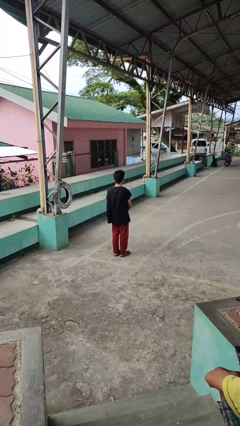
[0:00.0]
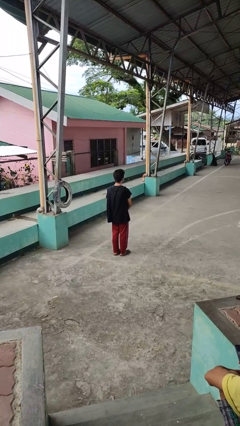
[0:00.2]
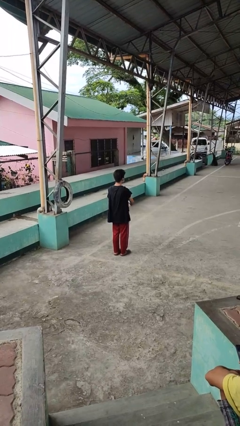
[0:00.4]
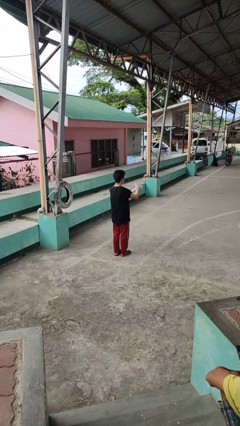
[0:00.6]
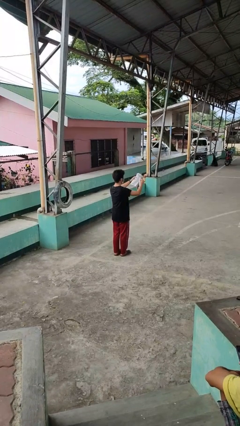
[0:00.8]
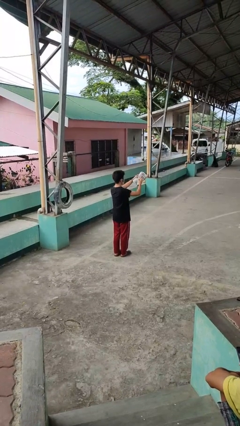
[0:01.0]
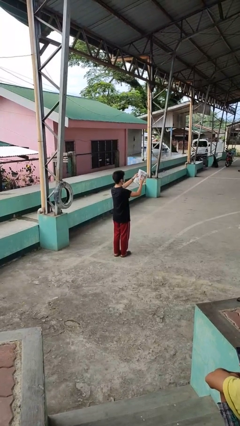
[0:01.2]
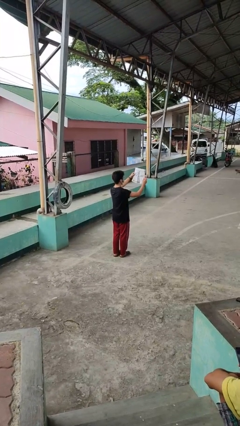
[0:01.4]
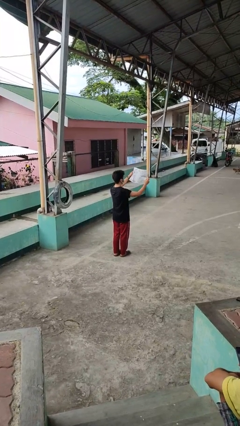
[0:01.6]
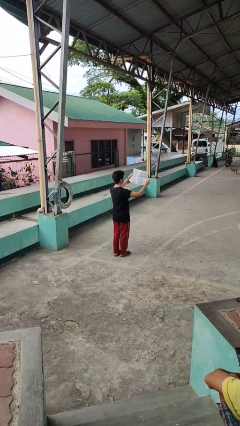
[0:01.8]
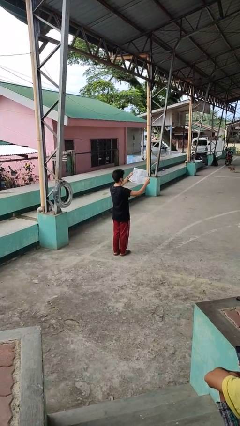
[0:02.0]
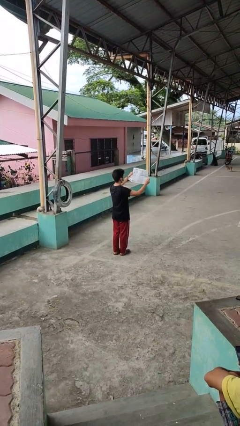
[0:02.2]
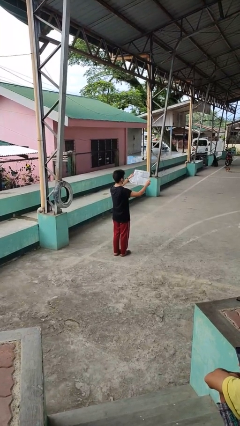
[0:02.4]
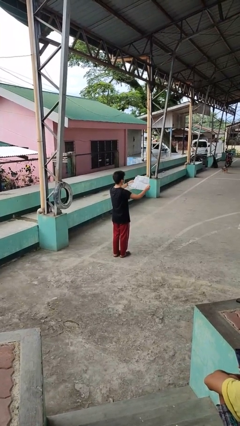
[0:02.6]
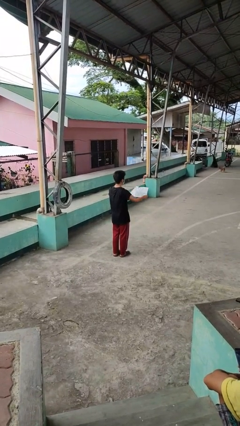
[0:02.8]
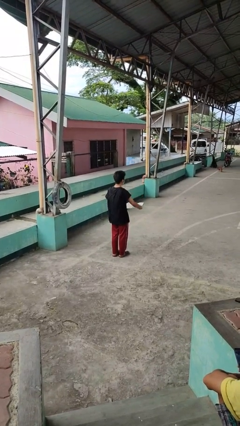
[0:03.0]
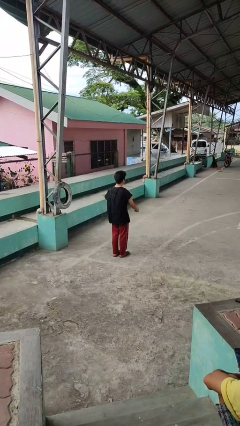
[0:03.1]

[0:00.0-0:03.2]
person reads newspaper

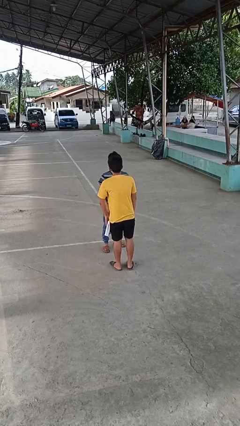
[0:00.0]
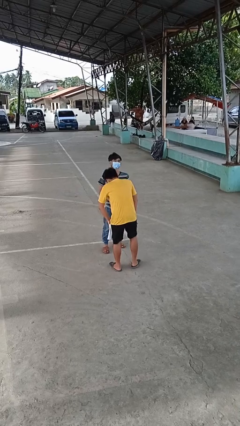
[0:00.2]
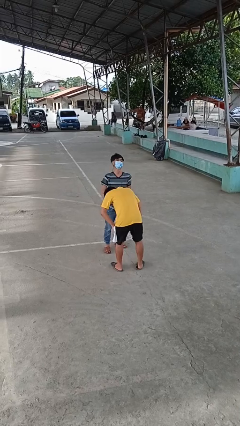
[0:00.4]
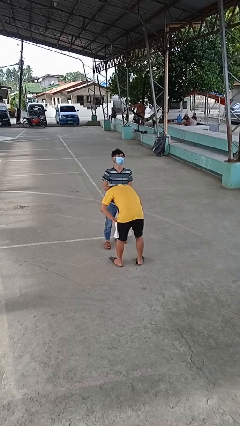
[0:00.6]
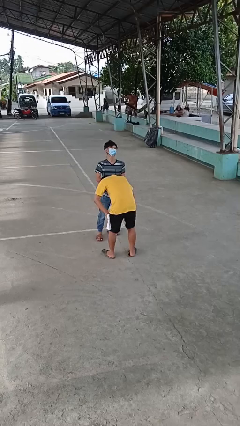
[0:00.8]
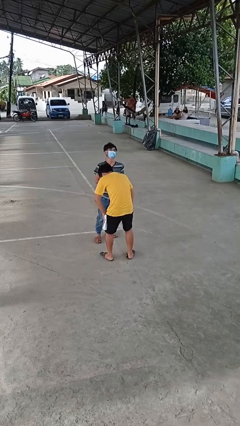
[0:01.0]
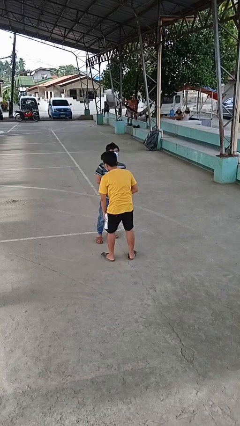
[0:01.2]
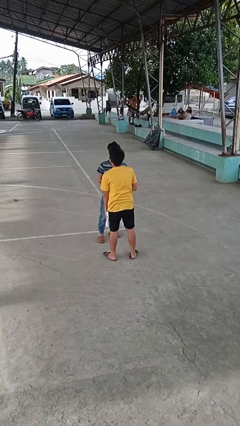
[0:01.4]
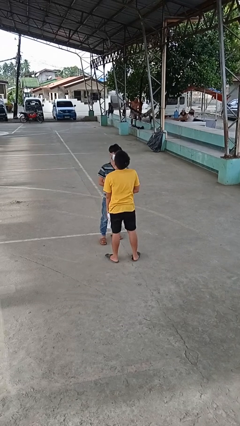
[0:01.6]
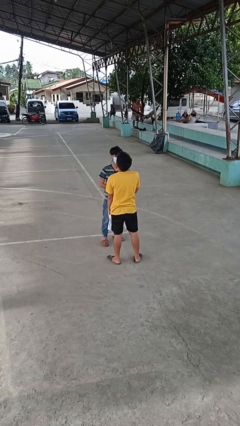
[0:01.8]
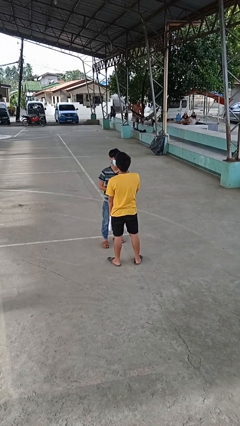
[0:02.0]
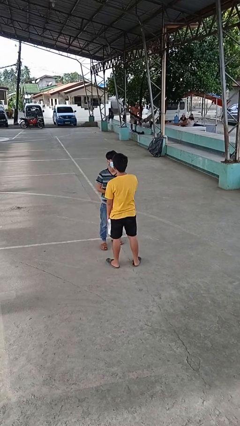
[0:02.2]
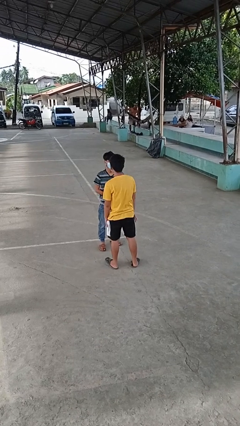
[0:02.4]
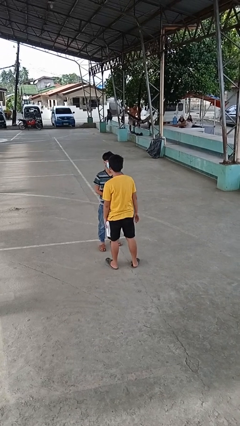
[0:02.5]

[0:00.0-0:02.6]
person laughs with person

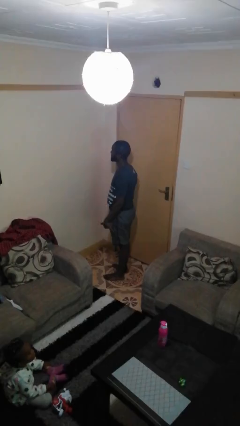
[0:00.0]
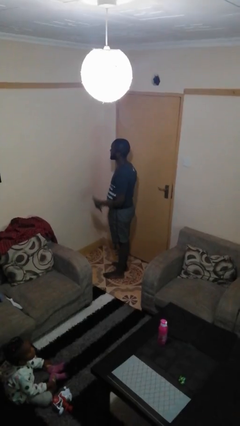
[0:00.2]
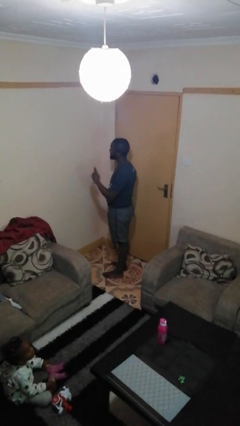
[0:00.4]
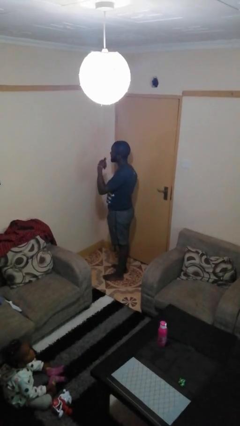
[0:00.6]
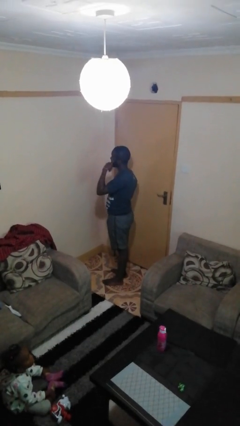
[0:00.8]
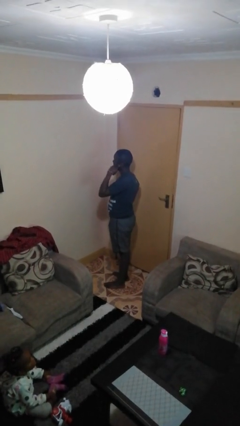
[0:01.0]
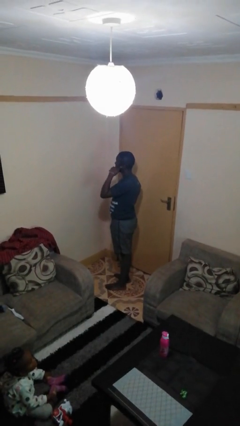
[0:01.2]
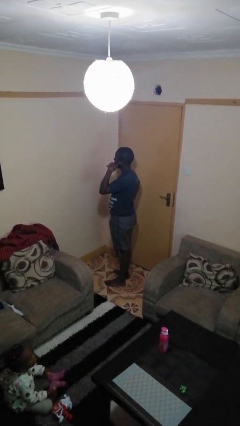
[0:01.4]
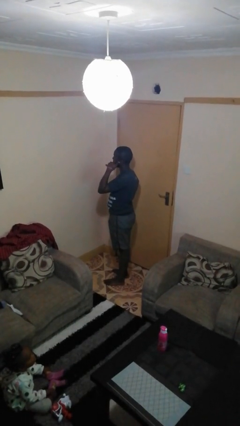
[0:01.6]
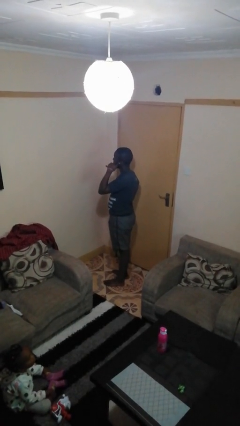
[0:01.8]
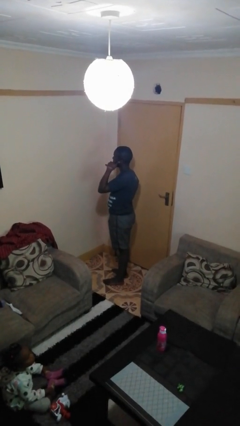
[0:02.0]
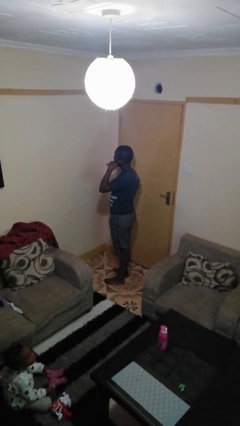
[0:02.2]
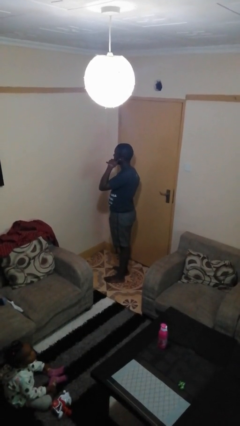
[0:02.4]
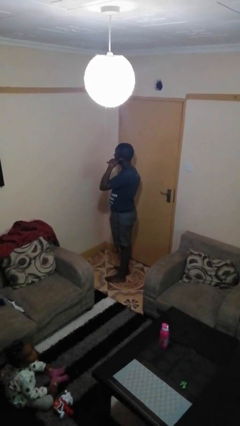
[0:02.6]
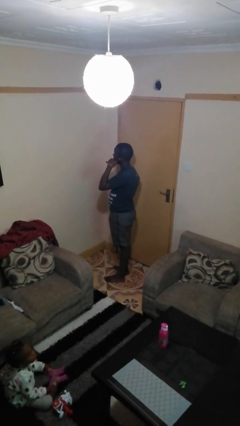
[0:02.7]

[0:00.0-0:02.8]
person gestures call me

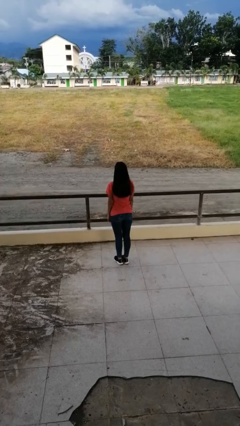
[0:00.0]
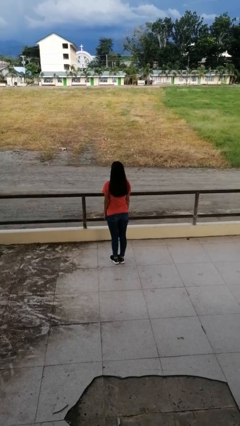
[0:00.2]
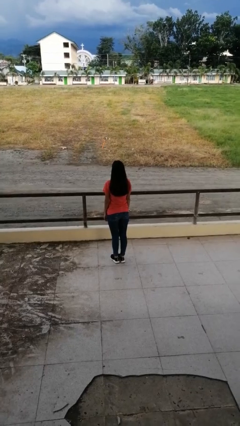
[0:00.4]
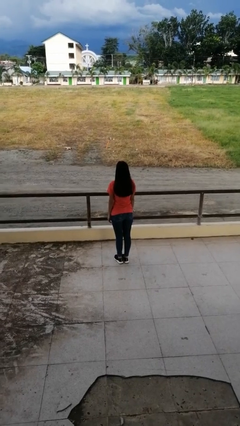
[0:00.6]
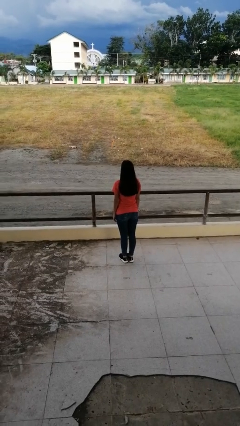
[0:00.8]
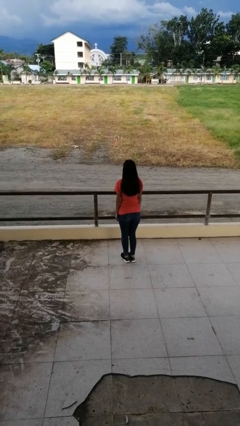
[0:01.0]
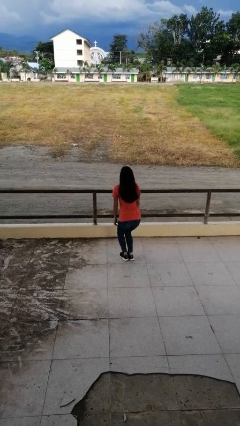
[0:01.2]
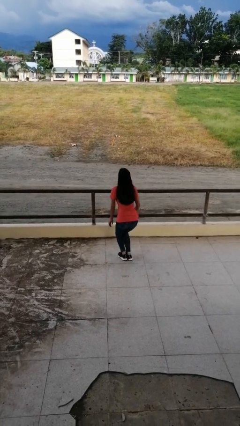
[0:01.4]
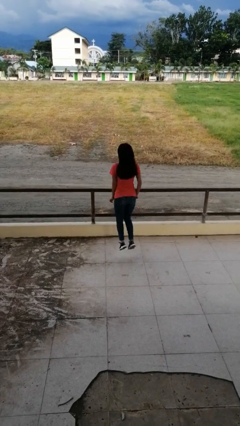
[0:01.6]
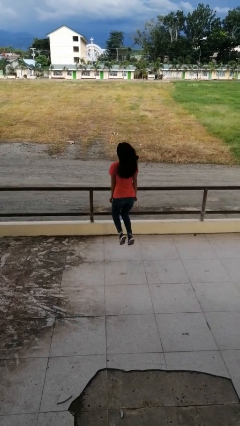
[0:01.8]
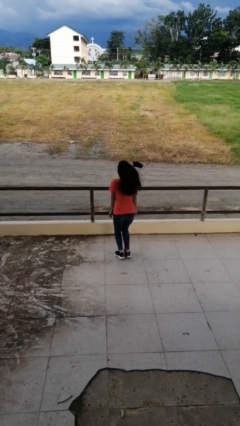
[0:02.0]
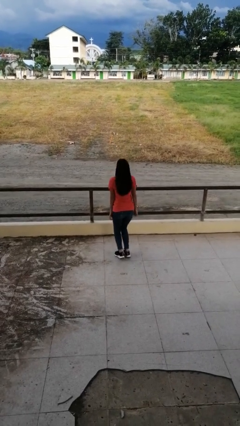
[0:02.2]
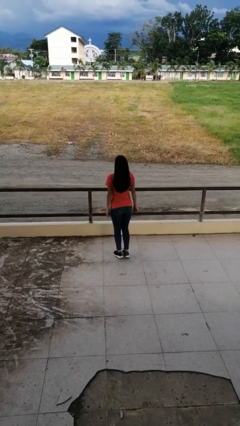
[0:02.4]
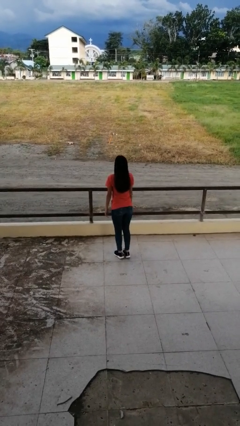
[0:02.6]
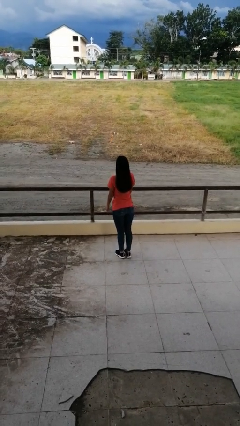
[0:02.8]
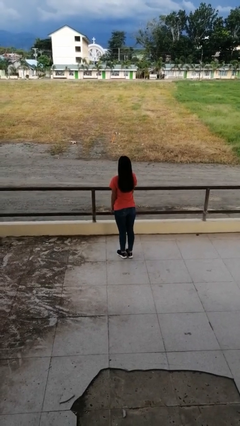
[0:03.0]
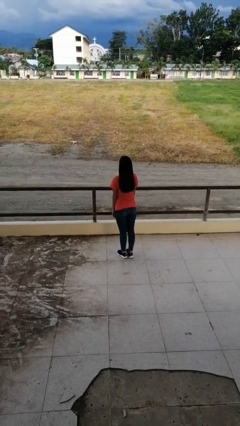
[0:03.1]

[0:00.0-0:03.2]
person jumps

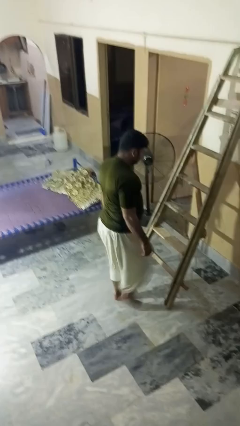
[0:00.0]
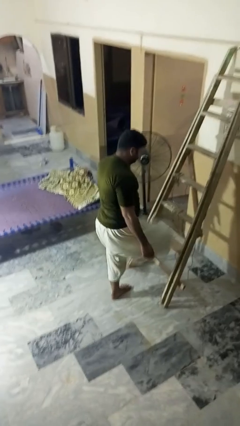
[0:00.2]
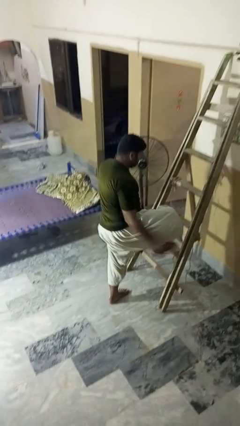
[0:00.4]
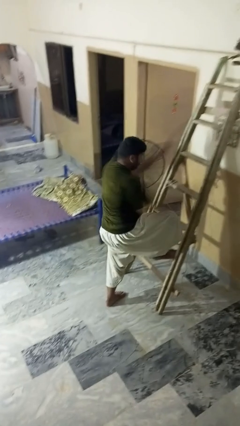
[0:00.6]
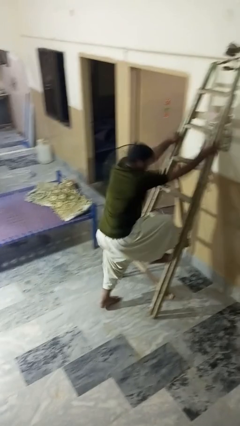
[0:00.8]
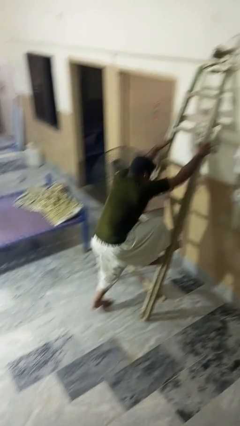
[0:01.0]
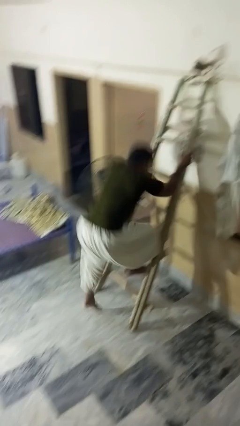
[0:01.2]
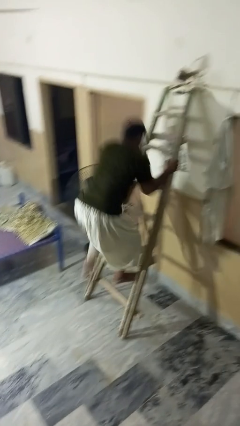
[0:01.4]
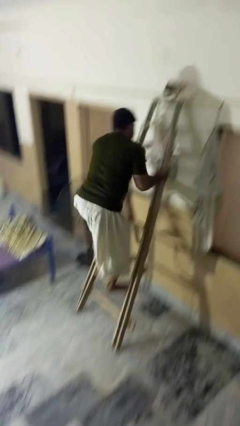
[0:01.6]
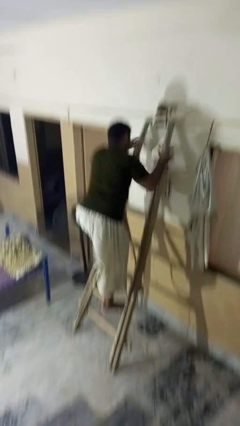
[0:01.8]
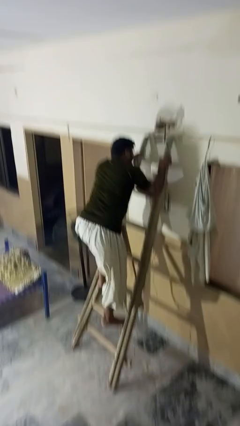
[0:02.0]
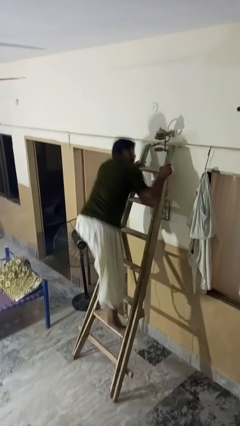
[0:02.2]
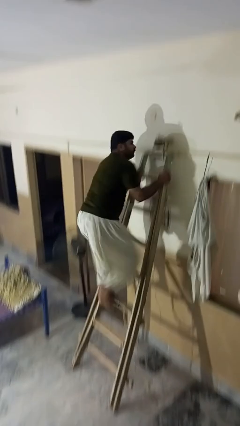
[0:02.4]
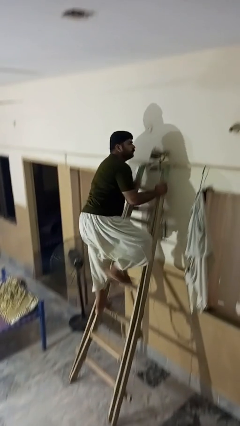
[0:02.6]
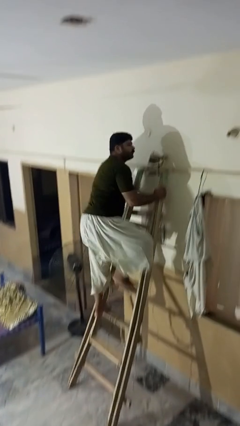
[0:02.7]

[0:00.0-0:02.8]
person climbs up ladder

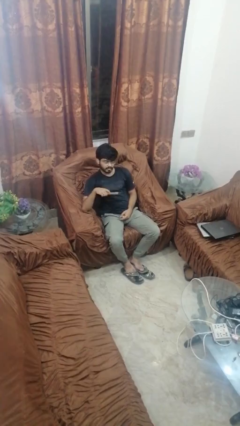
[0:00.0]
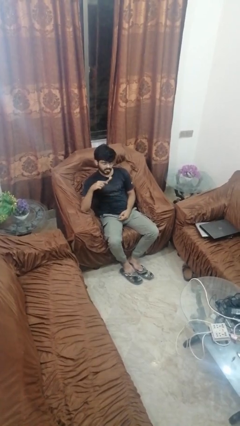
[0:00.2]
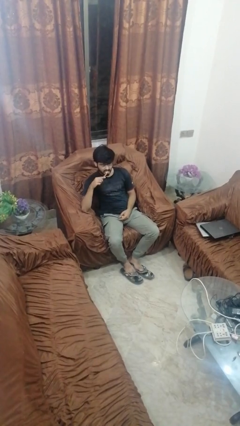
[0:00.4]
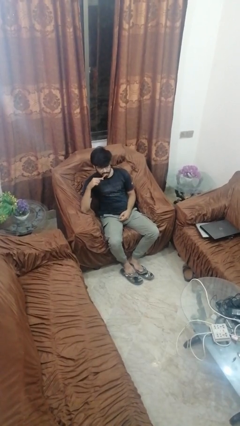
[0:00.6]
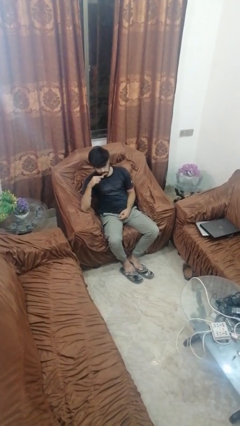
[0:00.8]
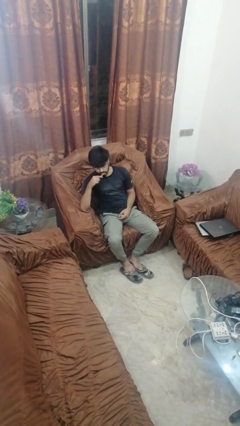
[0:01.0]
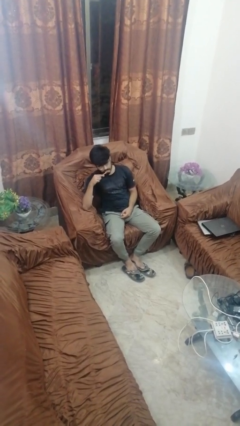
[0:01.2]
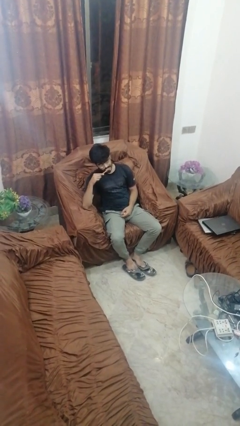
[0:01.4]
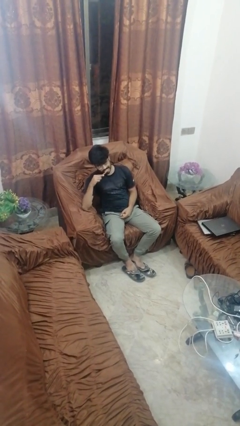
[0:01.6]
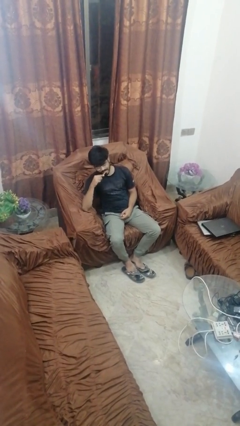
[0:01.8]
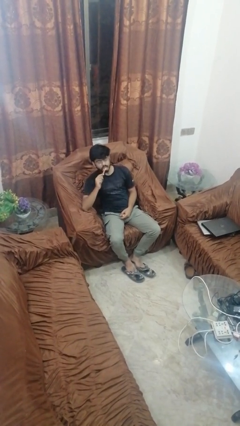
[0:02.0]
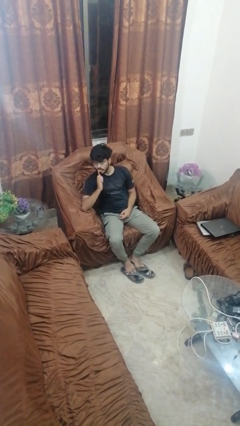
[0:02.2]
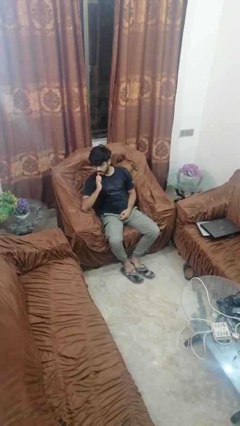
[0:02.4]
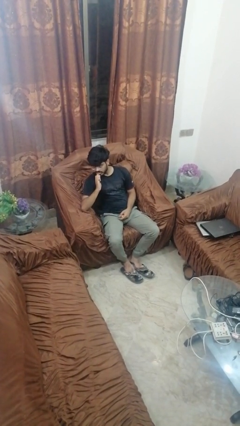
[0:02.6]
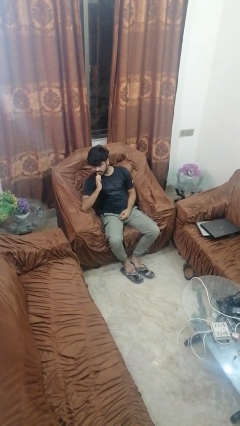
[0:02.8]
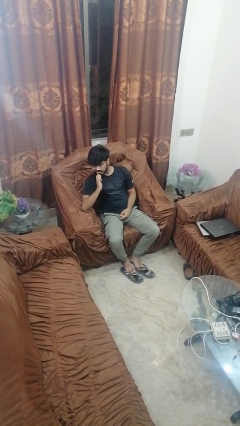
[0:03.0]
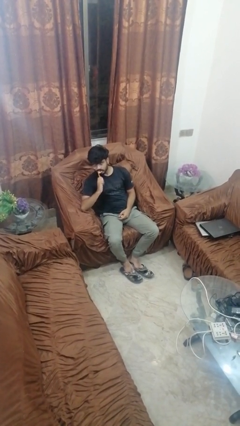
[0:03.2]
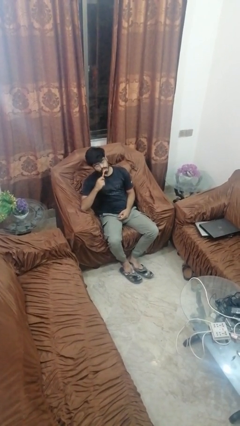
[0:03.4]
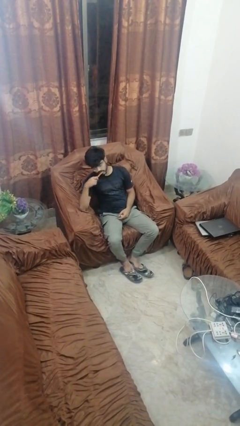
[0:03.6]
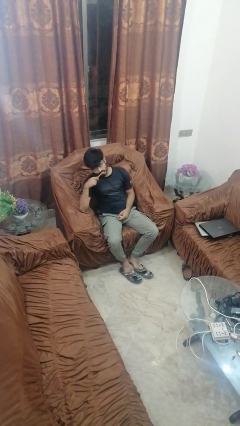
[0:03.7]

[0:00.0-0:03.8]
person brushes teeth
